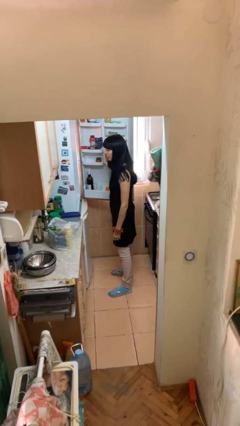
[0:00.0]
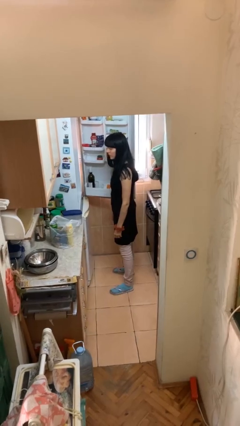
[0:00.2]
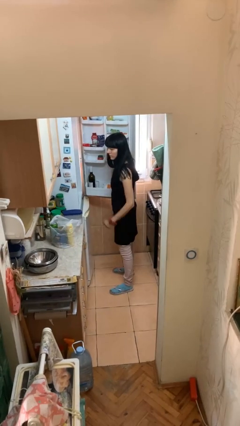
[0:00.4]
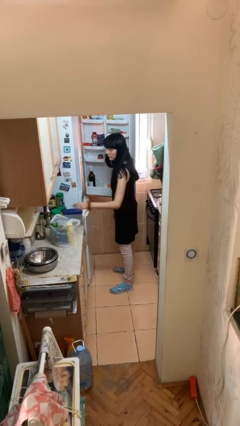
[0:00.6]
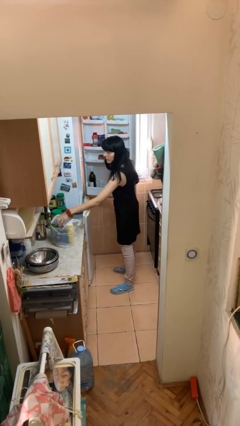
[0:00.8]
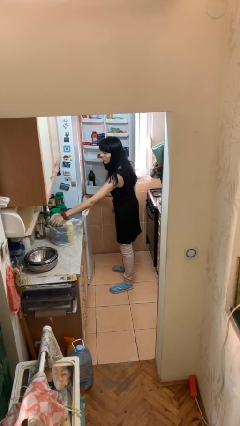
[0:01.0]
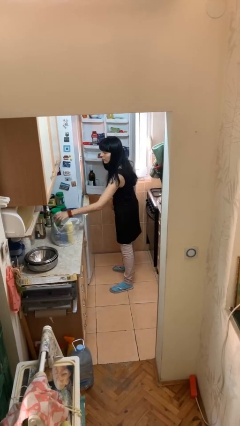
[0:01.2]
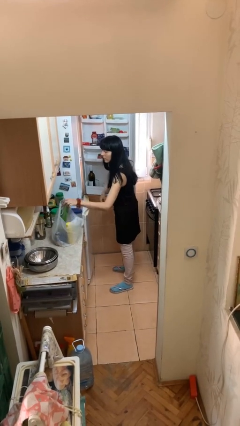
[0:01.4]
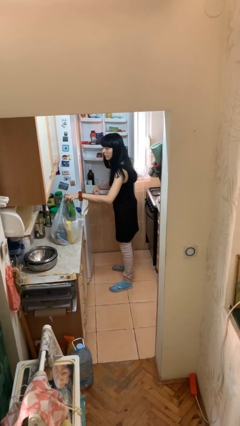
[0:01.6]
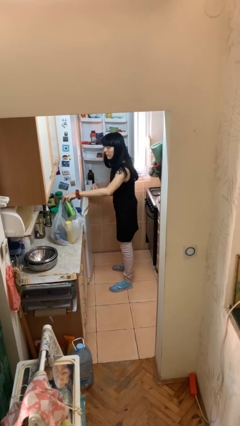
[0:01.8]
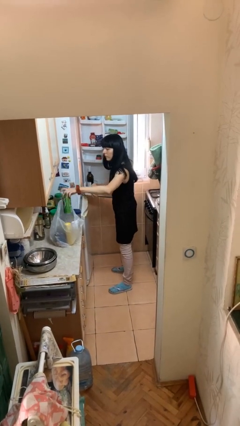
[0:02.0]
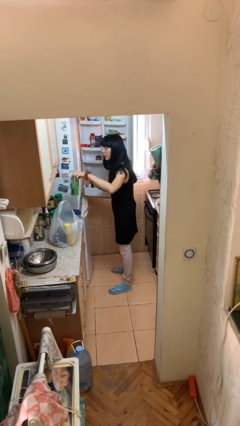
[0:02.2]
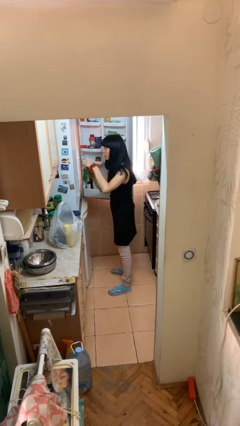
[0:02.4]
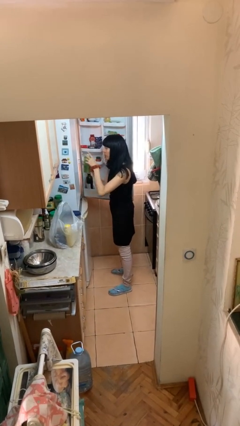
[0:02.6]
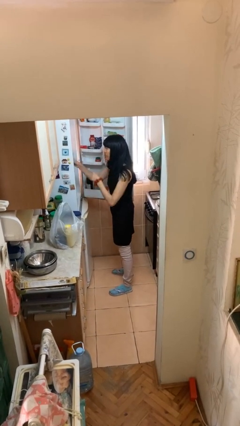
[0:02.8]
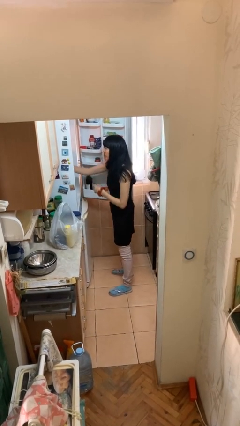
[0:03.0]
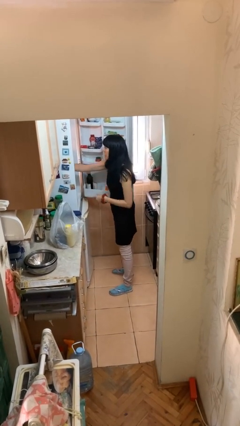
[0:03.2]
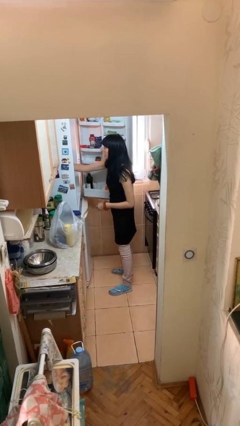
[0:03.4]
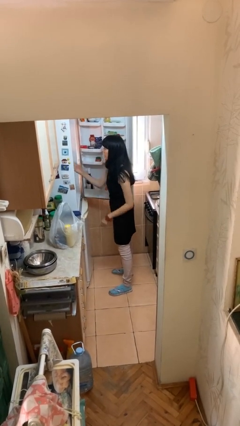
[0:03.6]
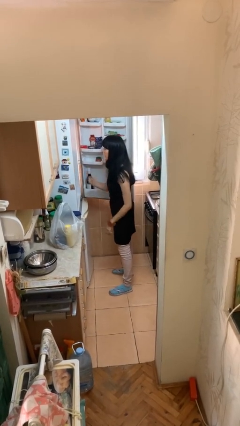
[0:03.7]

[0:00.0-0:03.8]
person loads groceries into refrigerator

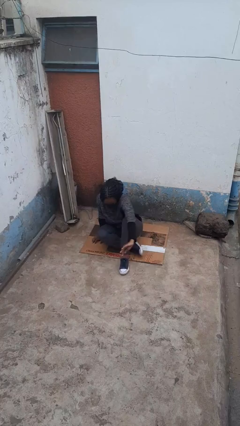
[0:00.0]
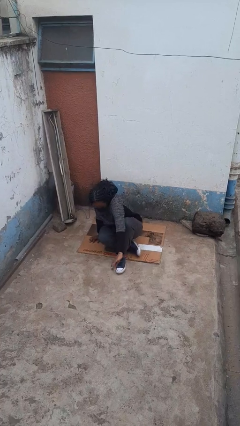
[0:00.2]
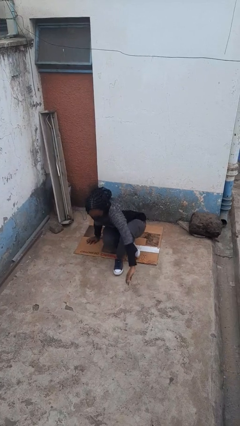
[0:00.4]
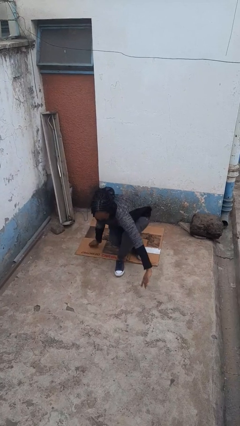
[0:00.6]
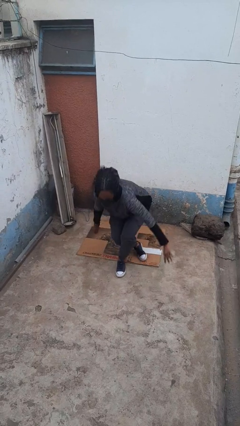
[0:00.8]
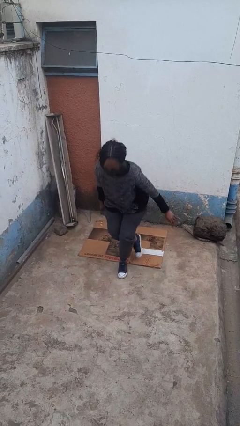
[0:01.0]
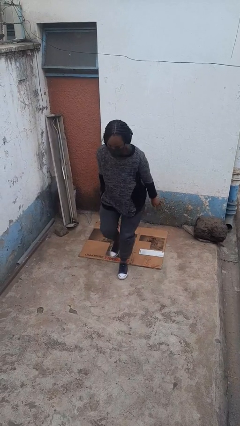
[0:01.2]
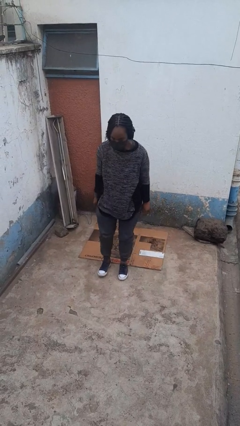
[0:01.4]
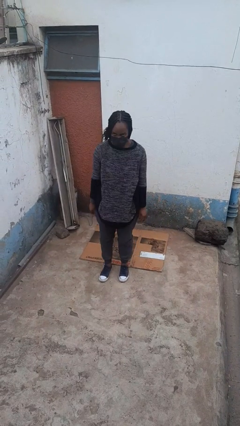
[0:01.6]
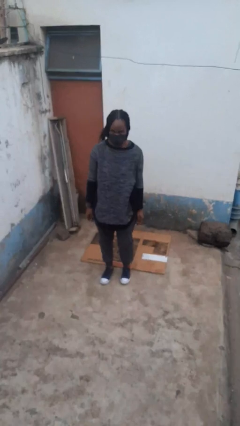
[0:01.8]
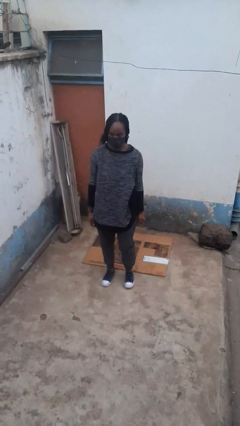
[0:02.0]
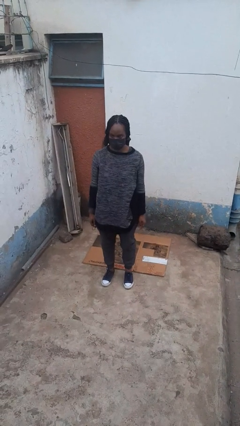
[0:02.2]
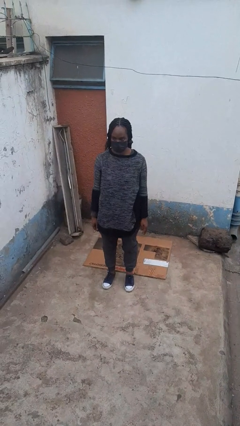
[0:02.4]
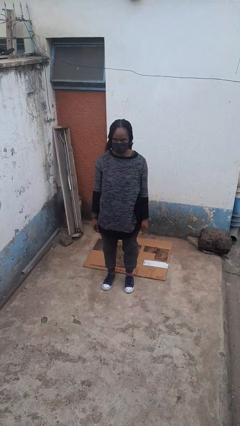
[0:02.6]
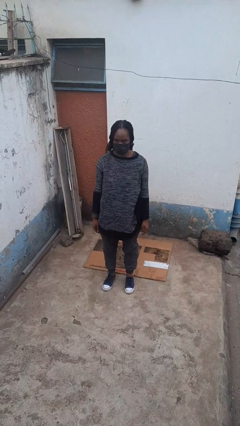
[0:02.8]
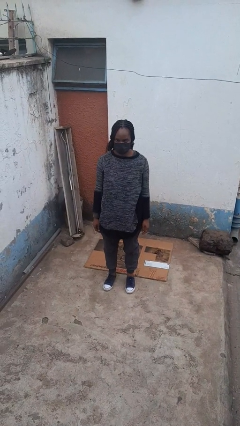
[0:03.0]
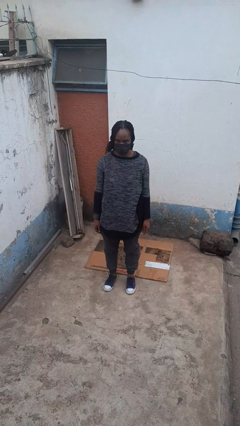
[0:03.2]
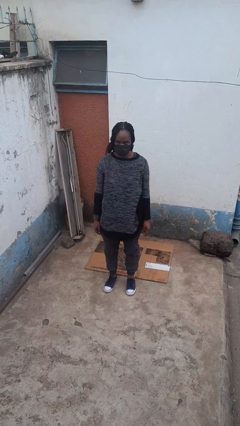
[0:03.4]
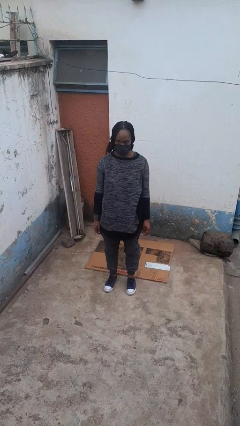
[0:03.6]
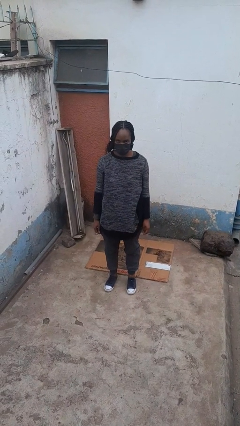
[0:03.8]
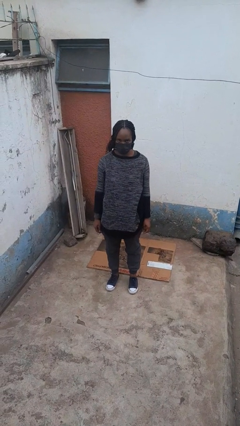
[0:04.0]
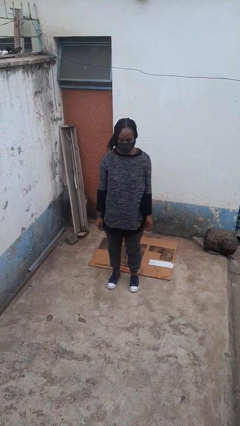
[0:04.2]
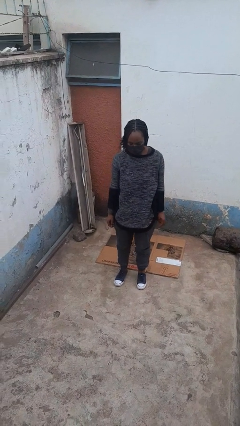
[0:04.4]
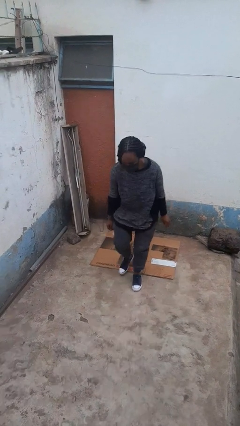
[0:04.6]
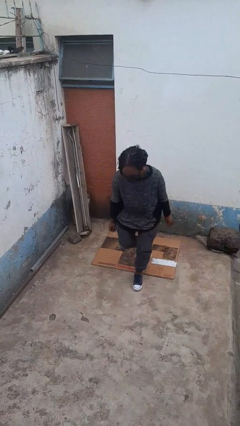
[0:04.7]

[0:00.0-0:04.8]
person stands up from floor

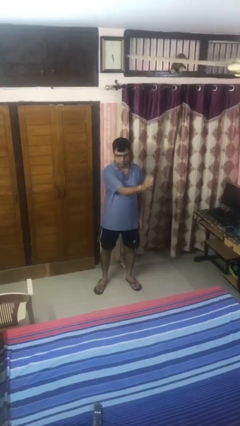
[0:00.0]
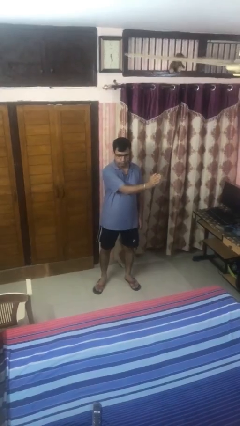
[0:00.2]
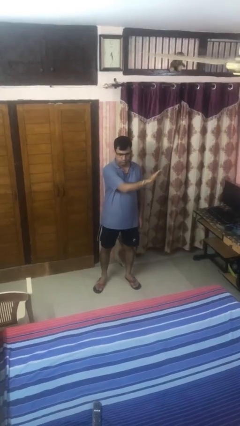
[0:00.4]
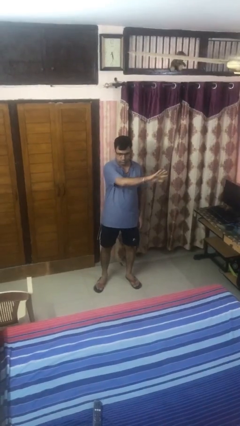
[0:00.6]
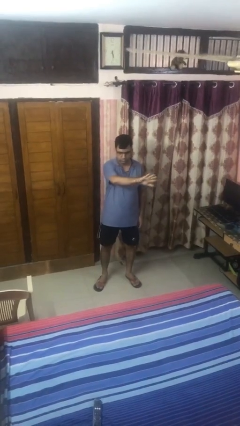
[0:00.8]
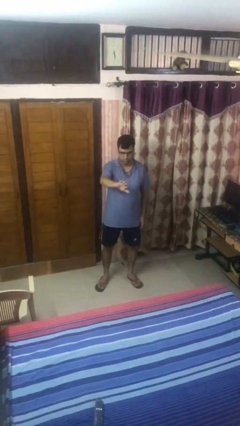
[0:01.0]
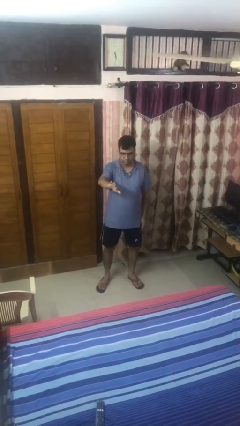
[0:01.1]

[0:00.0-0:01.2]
person gestures swipe right

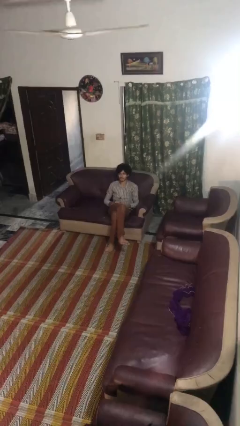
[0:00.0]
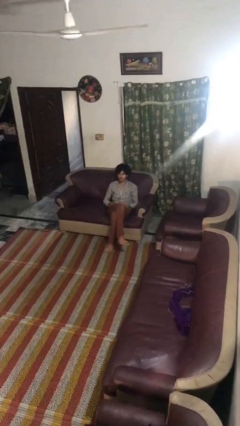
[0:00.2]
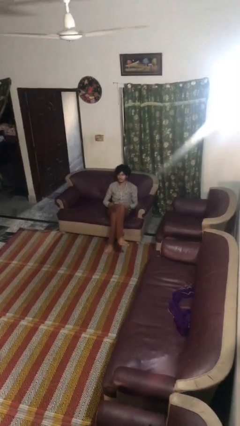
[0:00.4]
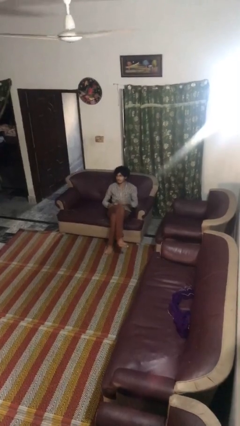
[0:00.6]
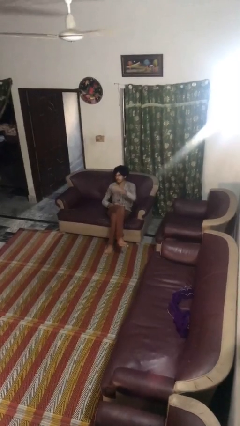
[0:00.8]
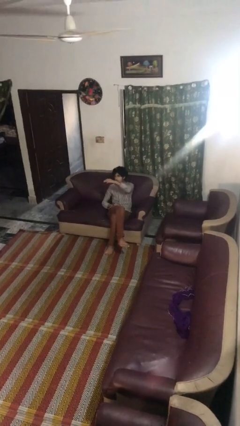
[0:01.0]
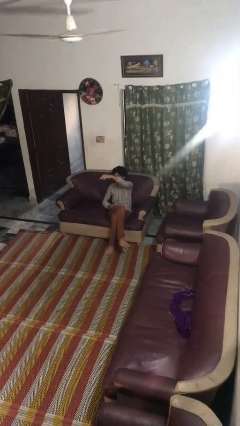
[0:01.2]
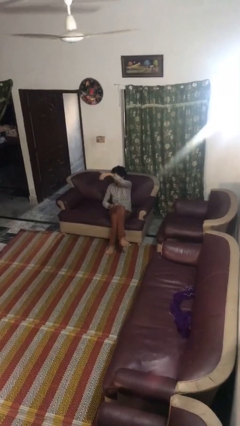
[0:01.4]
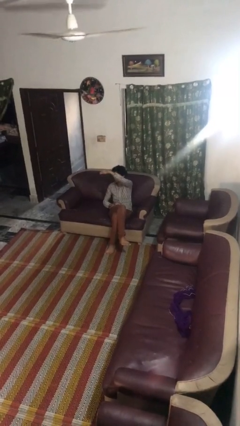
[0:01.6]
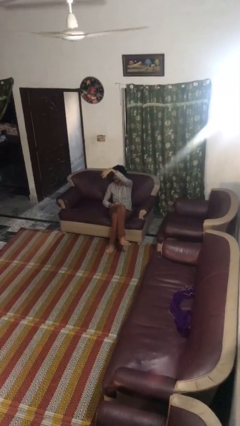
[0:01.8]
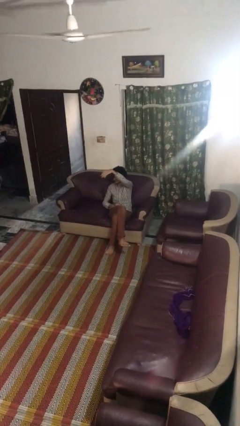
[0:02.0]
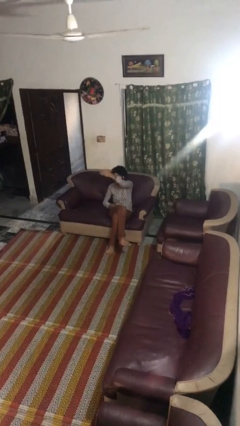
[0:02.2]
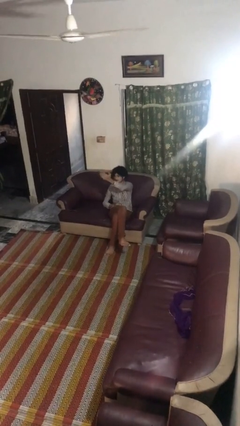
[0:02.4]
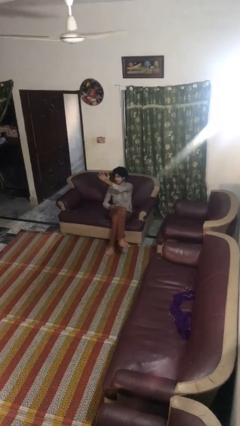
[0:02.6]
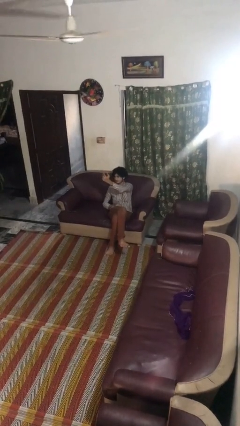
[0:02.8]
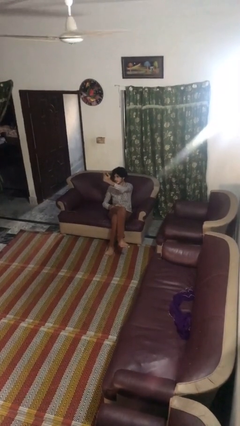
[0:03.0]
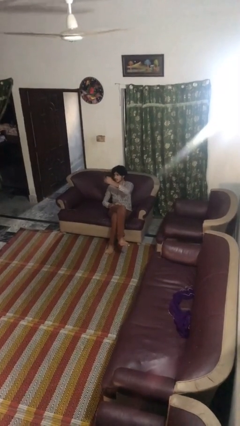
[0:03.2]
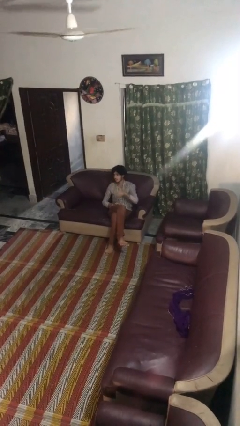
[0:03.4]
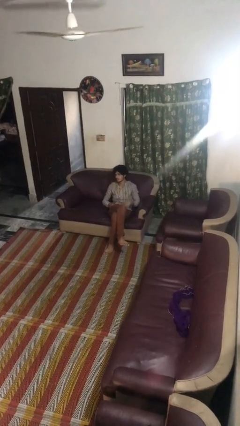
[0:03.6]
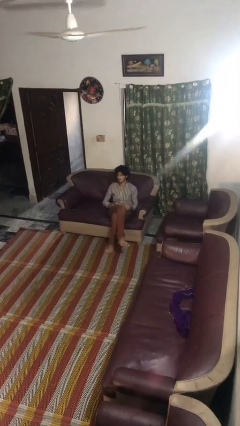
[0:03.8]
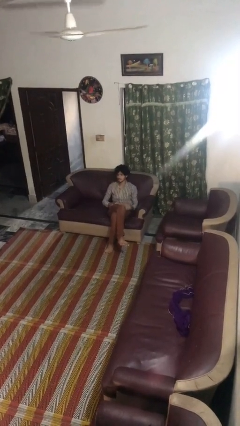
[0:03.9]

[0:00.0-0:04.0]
person gestures come here

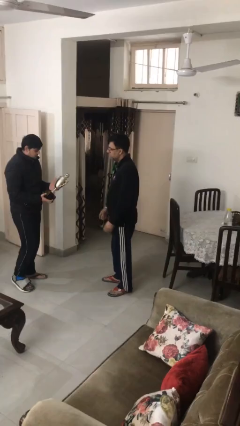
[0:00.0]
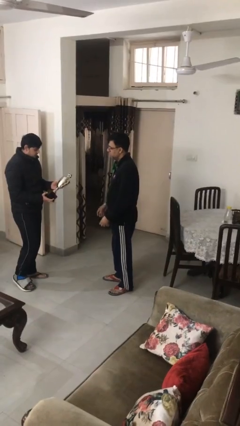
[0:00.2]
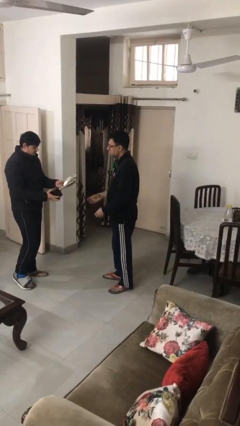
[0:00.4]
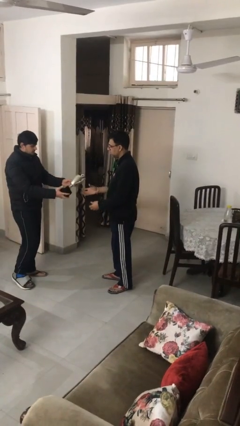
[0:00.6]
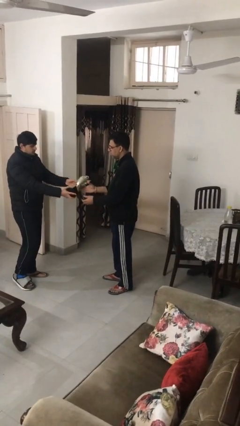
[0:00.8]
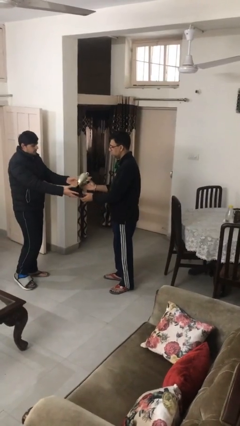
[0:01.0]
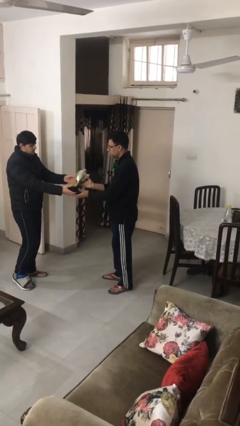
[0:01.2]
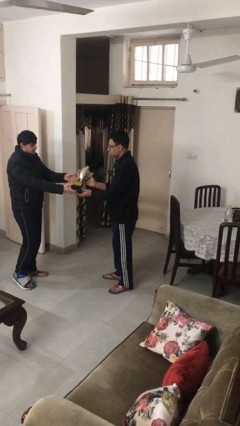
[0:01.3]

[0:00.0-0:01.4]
person transfers object to person

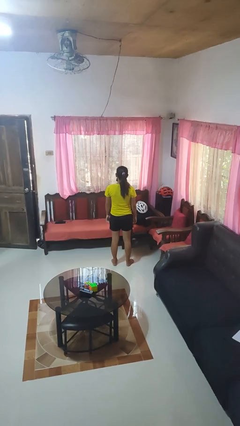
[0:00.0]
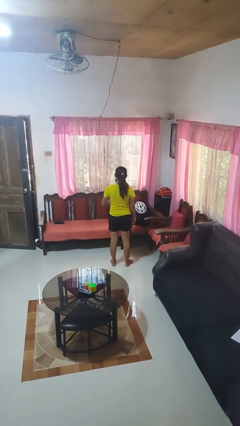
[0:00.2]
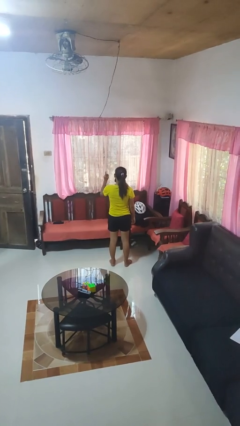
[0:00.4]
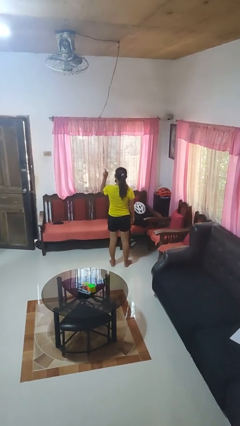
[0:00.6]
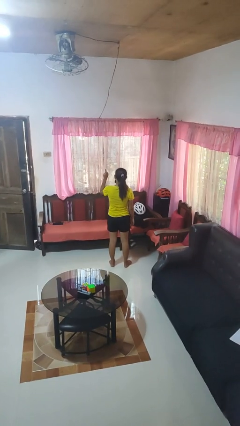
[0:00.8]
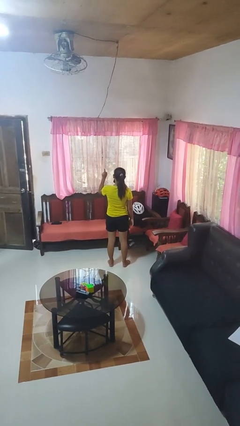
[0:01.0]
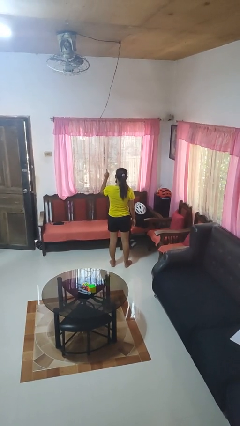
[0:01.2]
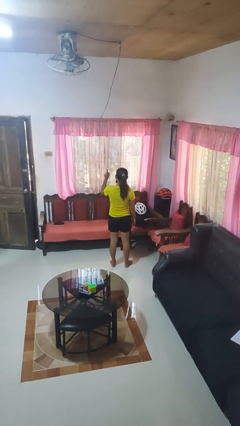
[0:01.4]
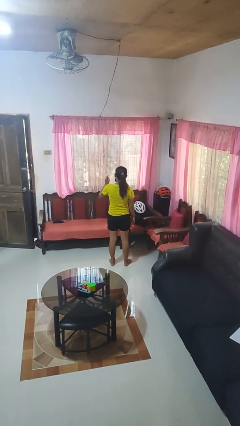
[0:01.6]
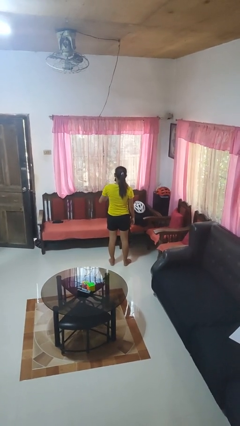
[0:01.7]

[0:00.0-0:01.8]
person gestures number one

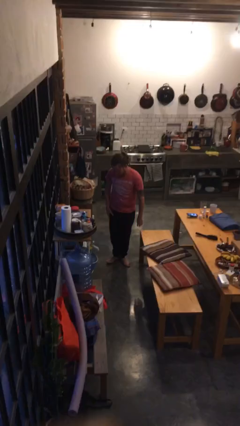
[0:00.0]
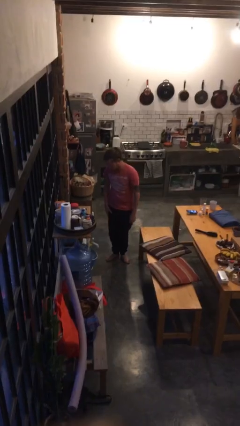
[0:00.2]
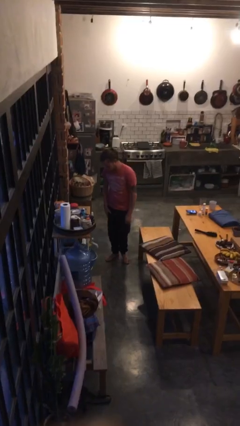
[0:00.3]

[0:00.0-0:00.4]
person picks up object from cabinet
